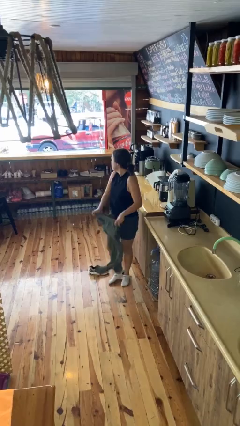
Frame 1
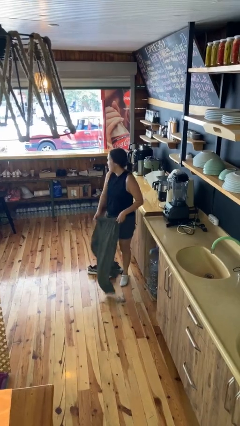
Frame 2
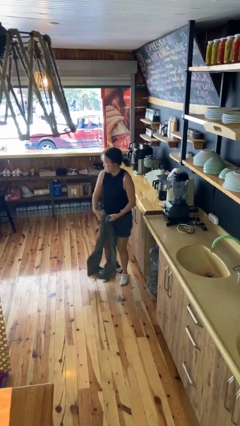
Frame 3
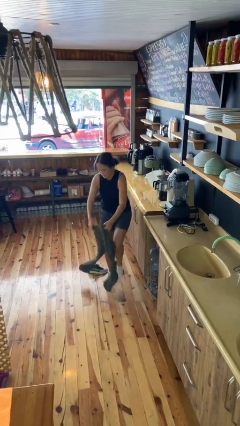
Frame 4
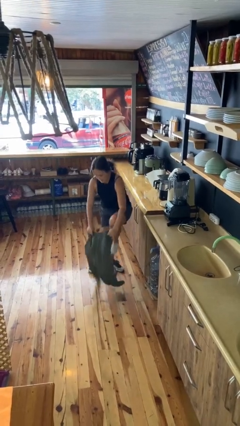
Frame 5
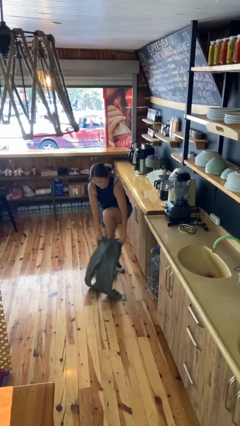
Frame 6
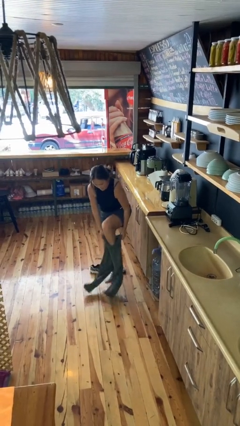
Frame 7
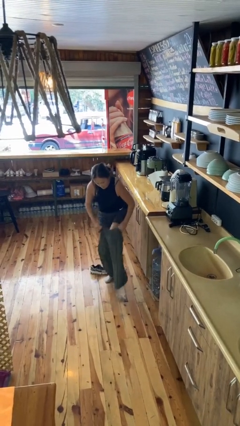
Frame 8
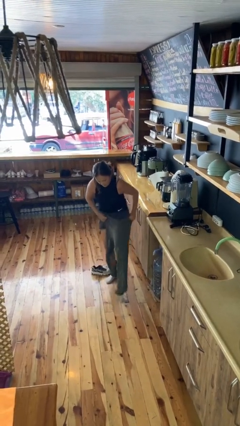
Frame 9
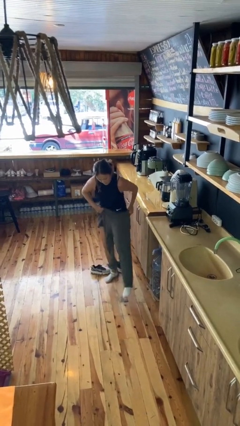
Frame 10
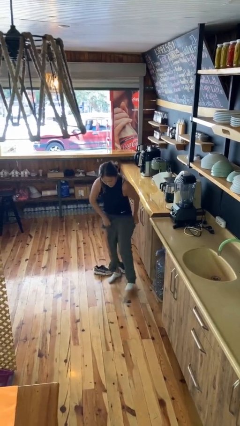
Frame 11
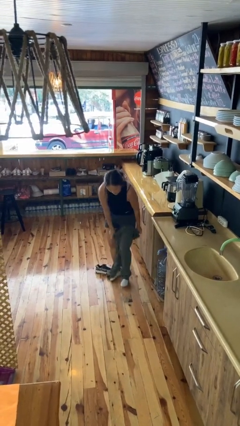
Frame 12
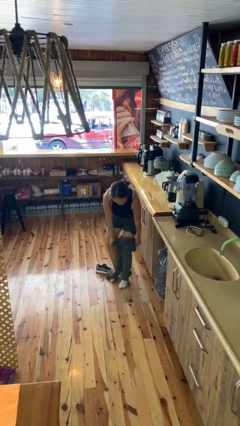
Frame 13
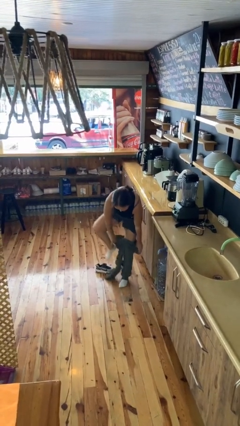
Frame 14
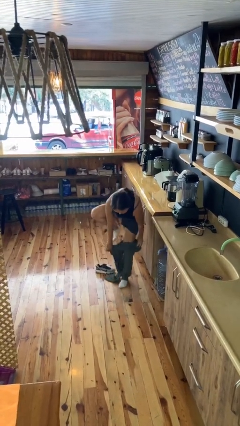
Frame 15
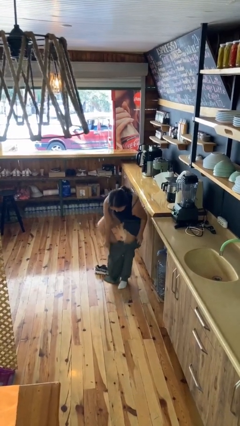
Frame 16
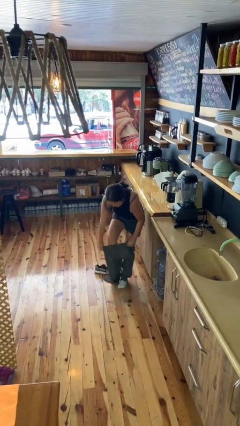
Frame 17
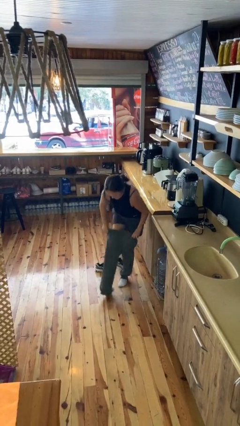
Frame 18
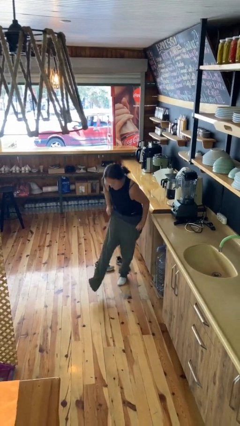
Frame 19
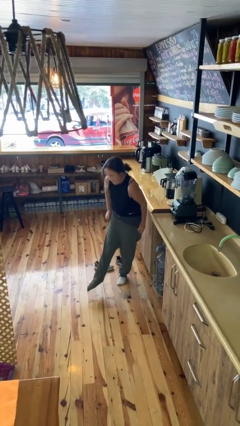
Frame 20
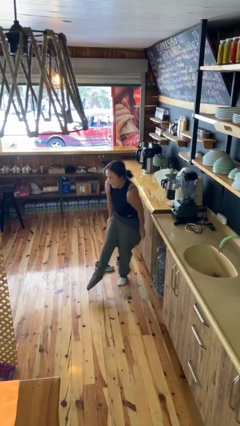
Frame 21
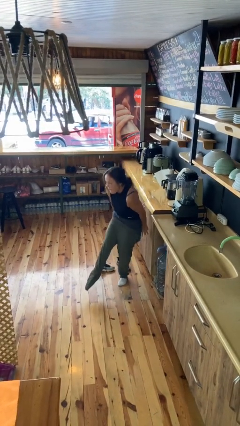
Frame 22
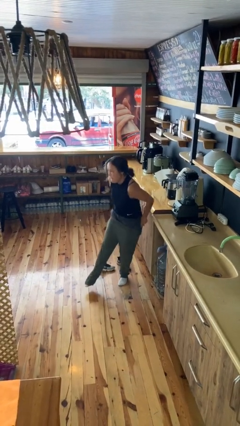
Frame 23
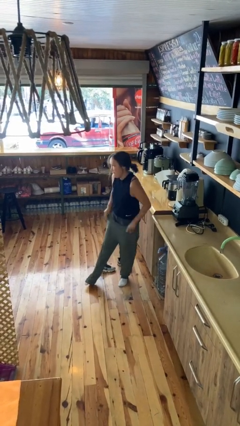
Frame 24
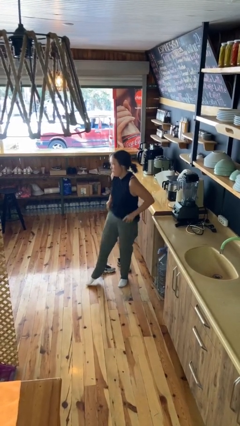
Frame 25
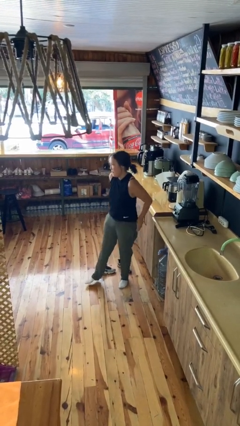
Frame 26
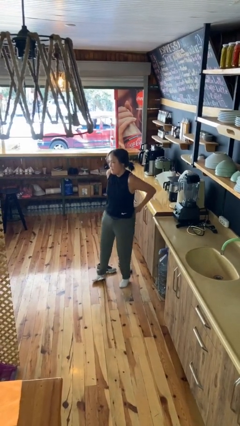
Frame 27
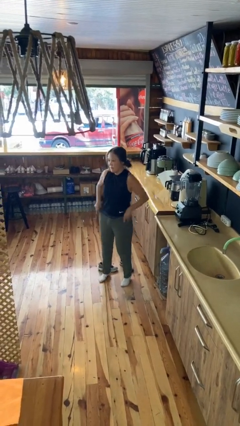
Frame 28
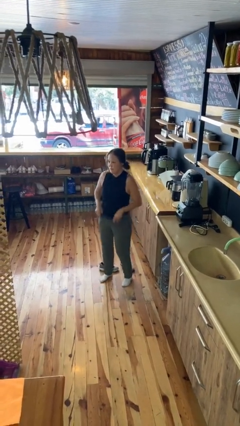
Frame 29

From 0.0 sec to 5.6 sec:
person puts on pants

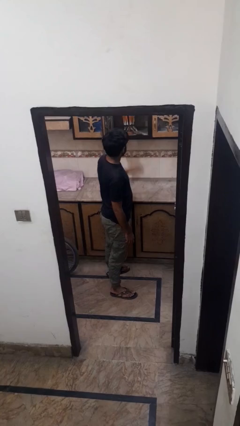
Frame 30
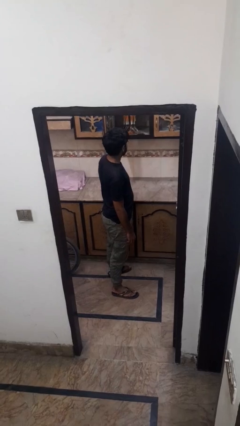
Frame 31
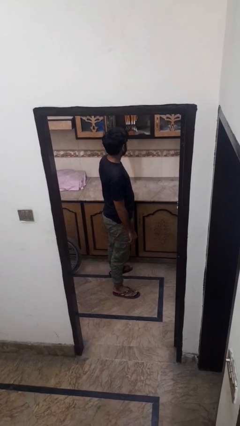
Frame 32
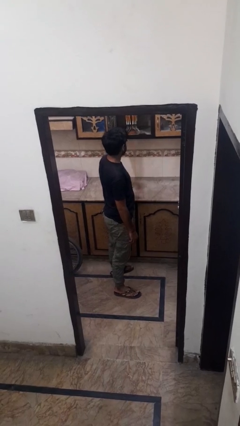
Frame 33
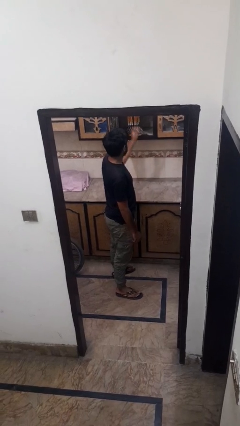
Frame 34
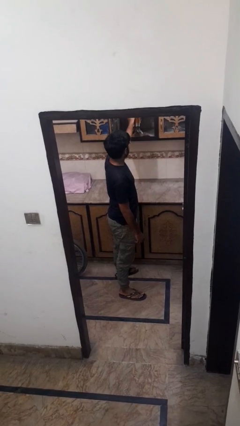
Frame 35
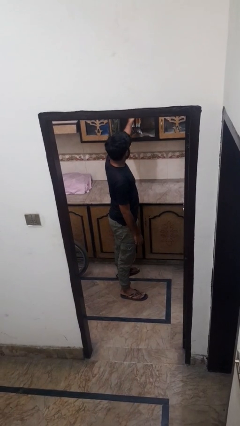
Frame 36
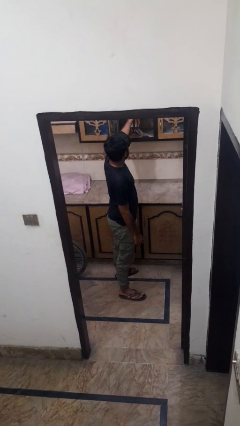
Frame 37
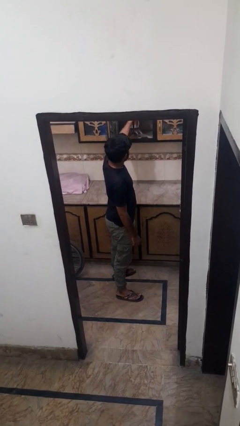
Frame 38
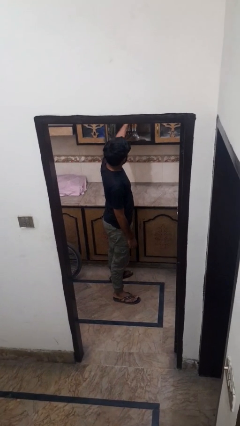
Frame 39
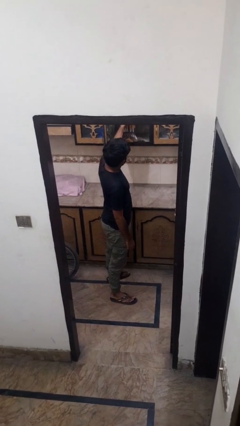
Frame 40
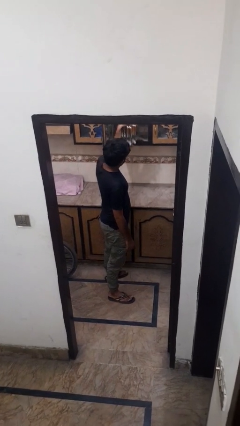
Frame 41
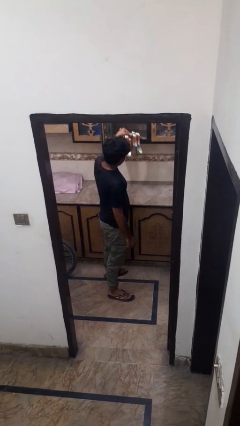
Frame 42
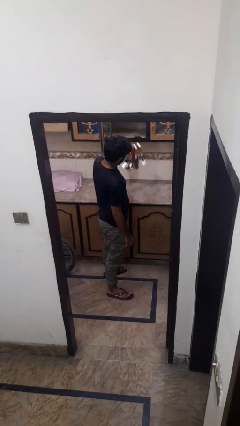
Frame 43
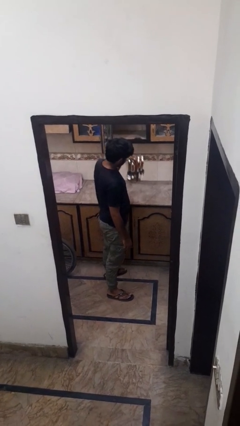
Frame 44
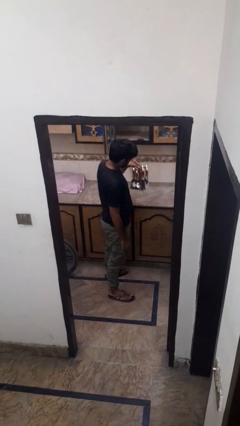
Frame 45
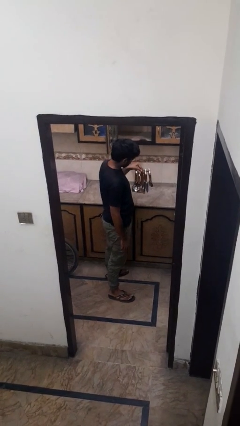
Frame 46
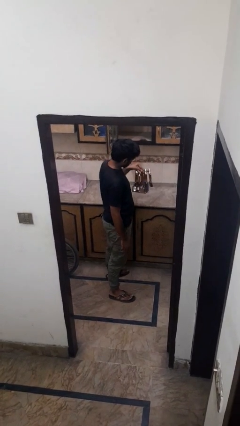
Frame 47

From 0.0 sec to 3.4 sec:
person picks up object from cabinet

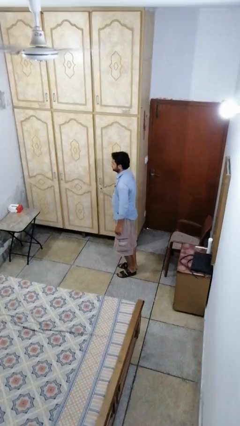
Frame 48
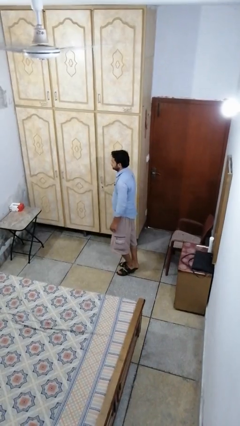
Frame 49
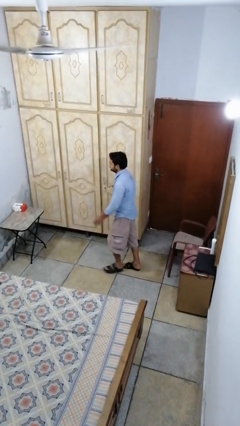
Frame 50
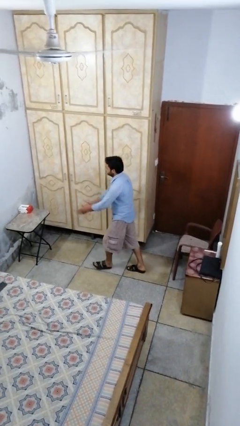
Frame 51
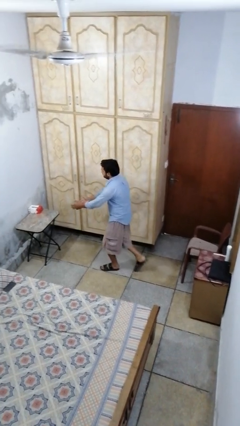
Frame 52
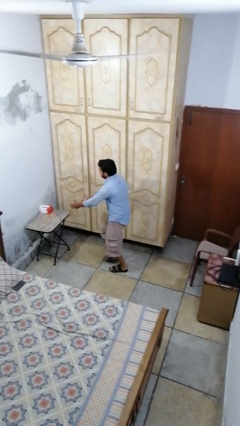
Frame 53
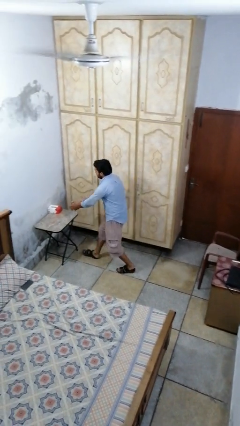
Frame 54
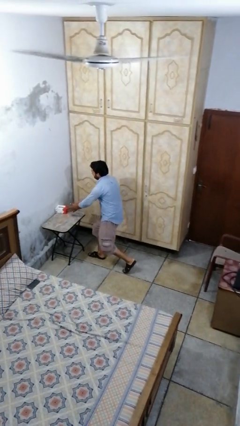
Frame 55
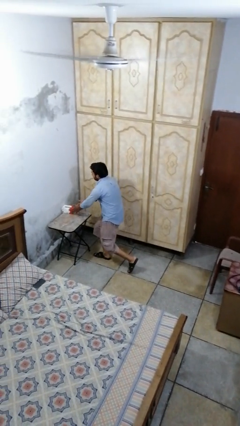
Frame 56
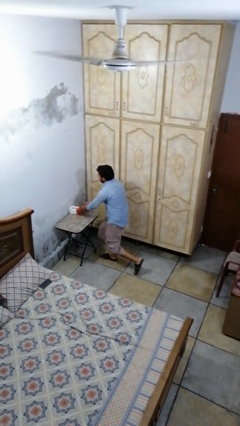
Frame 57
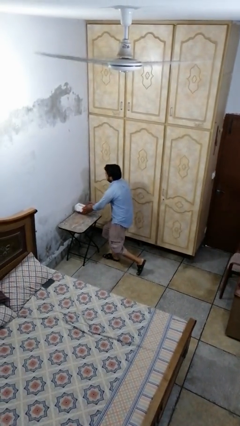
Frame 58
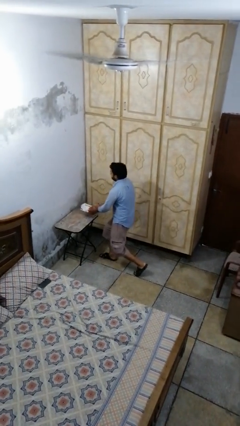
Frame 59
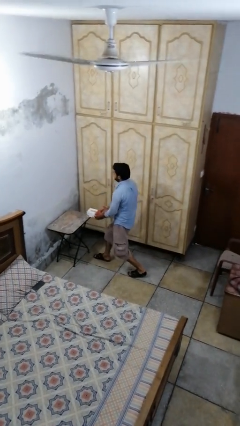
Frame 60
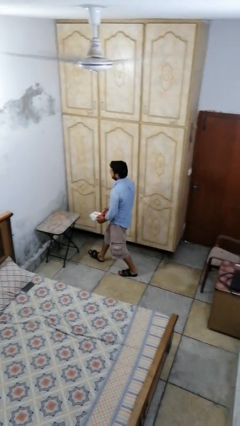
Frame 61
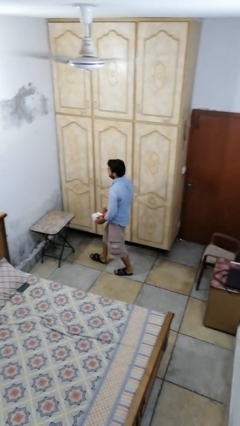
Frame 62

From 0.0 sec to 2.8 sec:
person picks up object from table

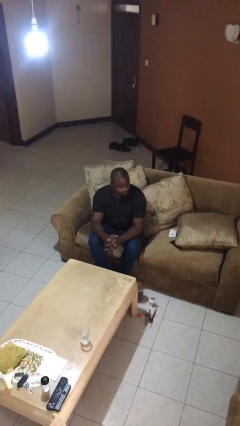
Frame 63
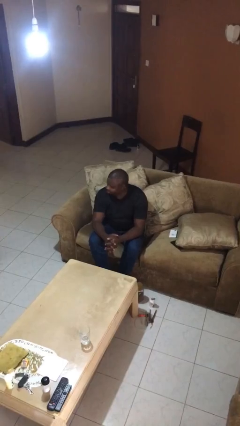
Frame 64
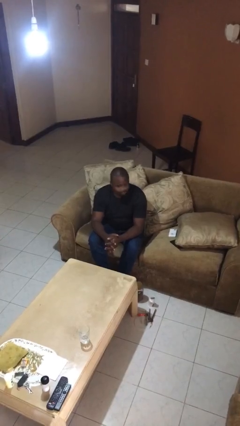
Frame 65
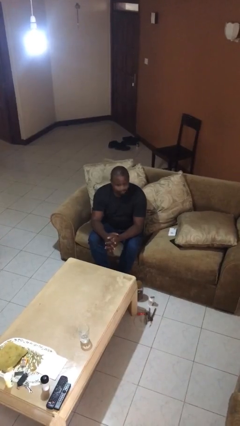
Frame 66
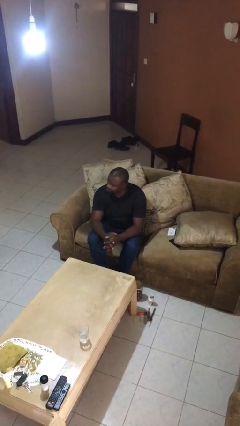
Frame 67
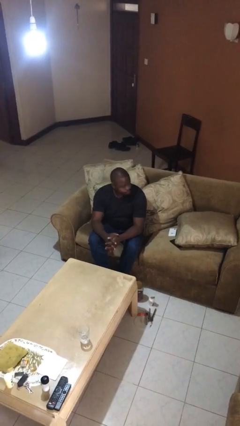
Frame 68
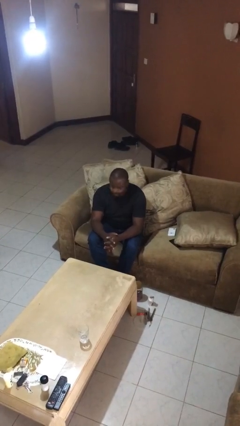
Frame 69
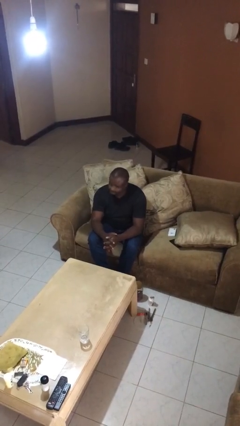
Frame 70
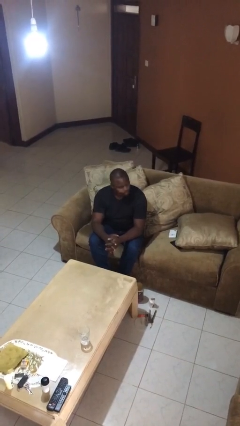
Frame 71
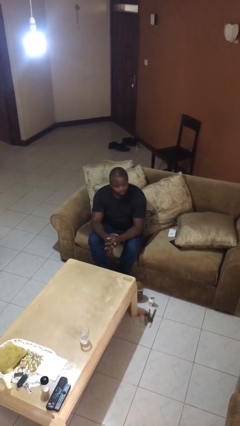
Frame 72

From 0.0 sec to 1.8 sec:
person shakes head

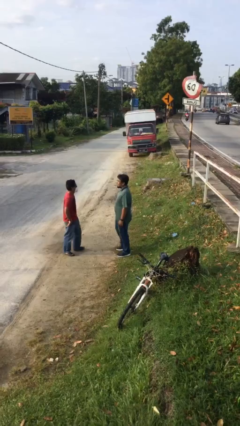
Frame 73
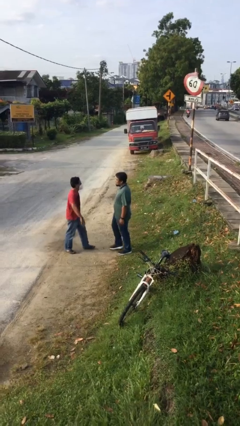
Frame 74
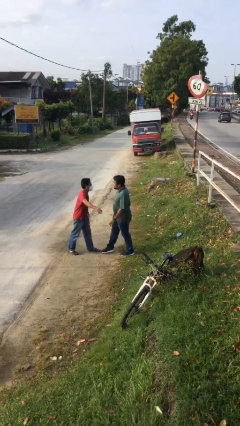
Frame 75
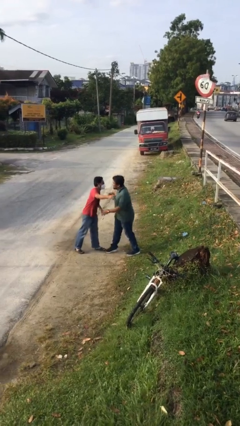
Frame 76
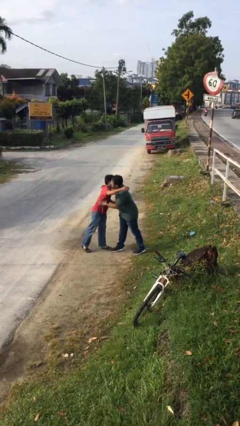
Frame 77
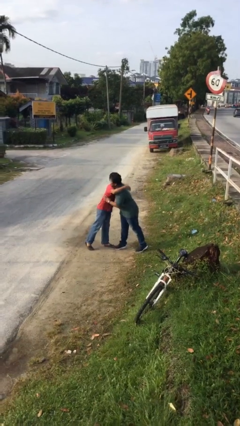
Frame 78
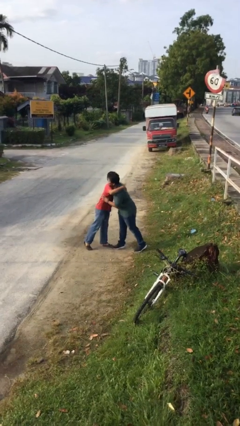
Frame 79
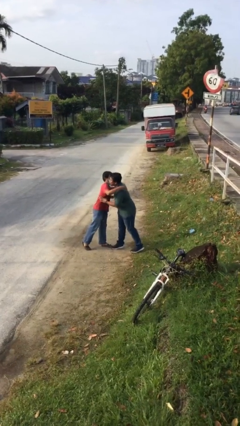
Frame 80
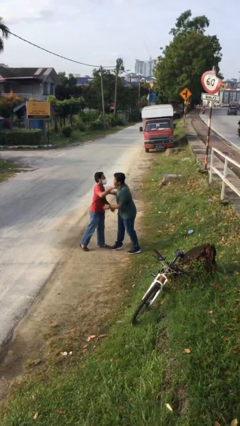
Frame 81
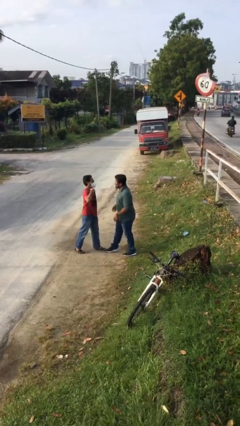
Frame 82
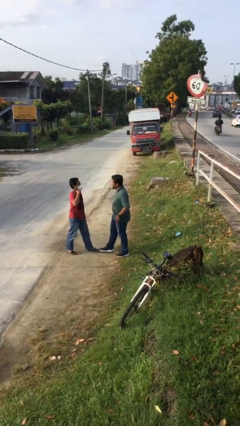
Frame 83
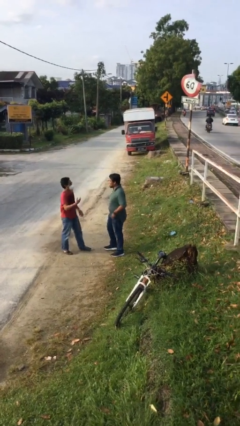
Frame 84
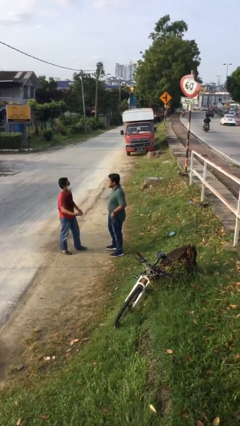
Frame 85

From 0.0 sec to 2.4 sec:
person embraces person

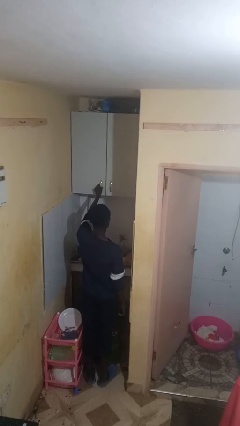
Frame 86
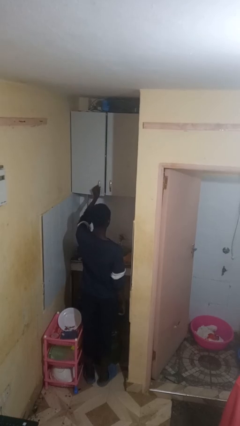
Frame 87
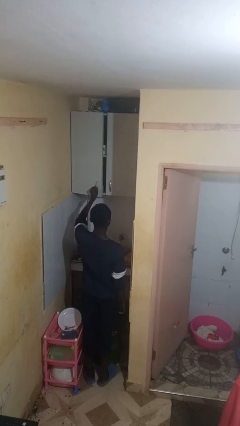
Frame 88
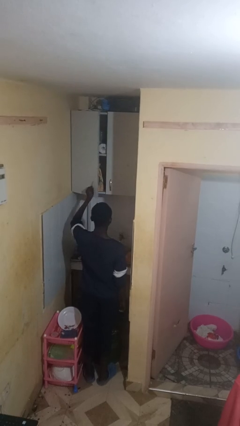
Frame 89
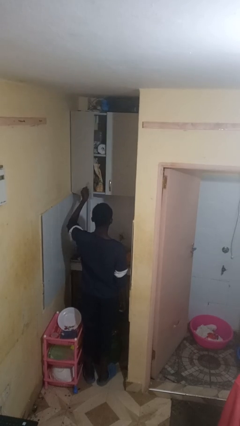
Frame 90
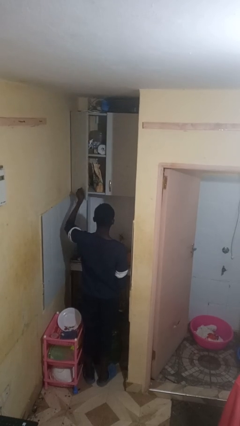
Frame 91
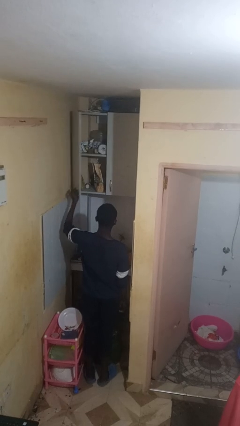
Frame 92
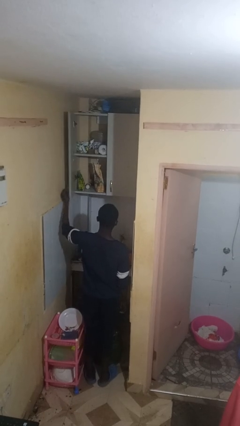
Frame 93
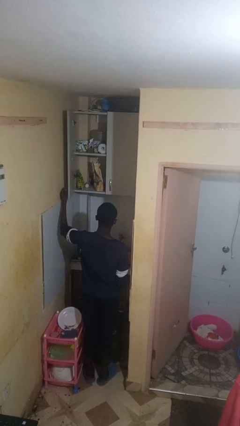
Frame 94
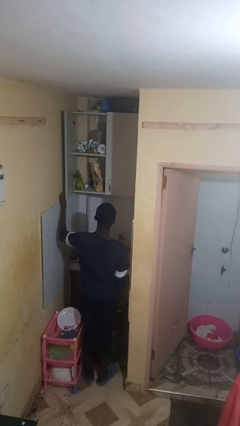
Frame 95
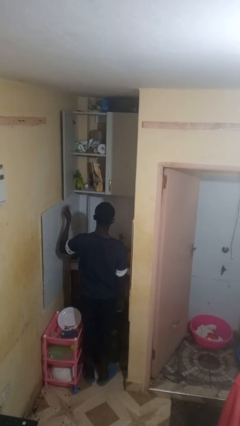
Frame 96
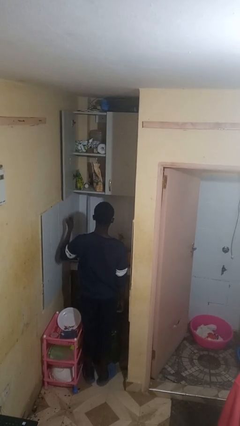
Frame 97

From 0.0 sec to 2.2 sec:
person opens cabinet
